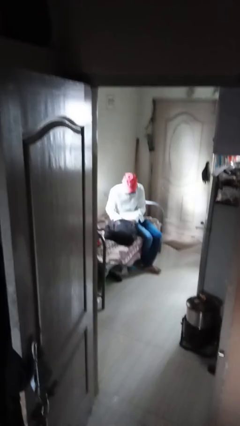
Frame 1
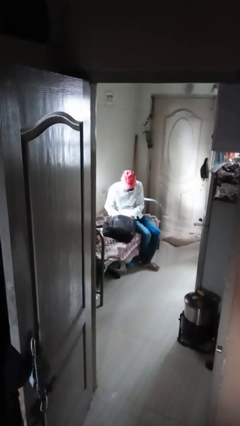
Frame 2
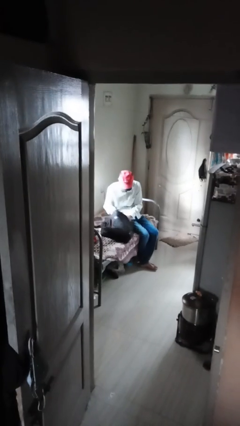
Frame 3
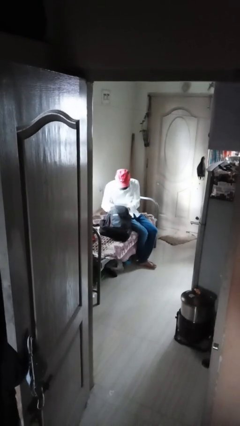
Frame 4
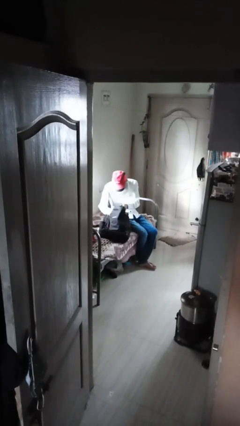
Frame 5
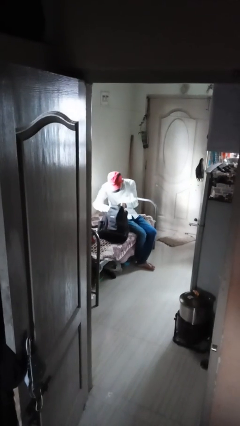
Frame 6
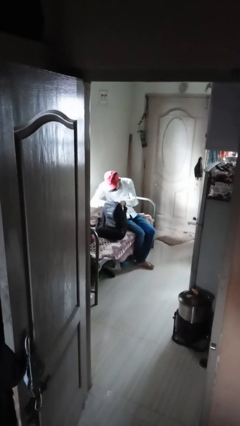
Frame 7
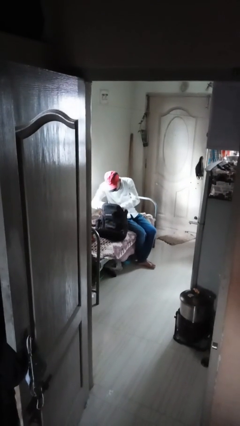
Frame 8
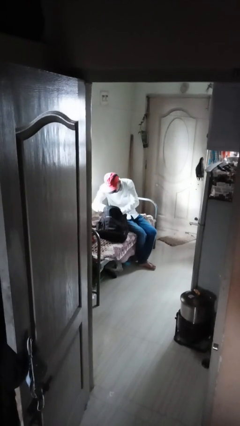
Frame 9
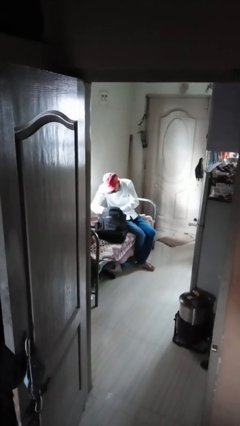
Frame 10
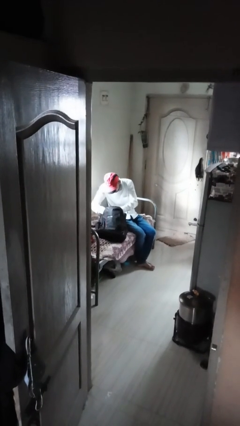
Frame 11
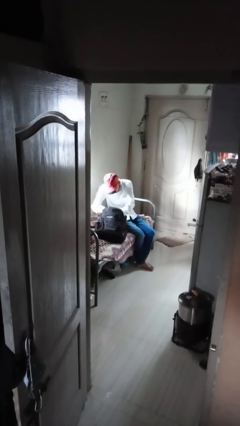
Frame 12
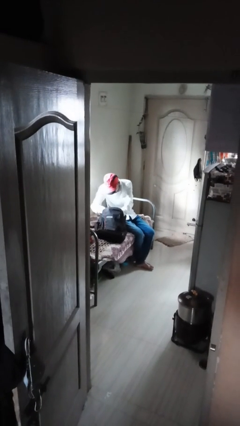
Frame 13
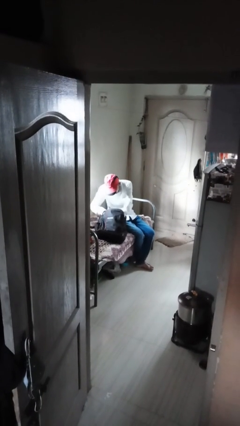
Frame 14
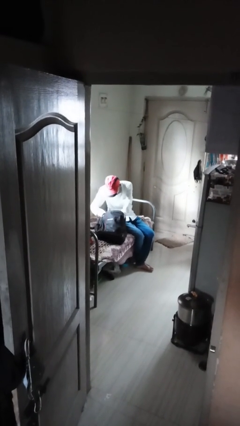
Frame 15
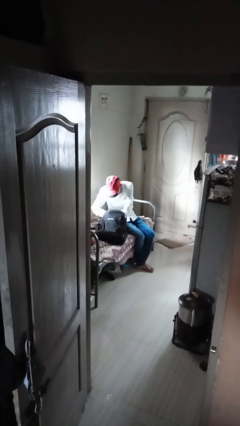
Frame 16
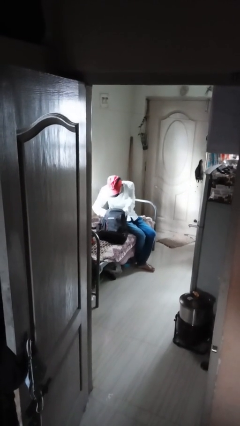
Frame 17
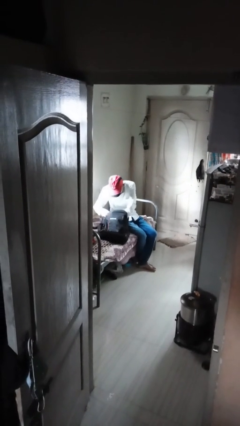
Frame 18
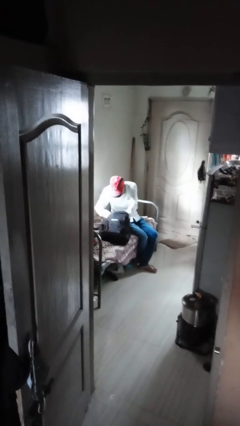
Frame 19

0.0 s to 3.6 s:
person searches in backpack

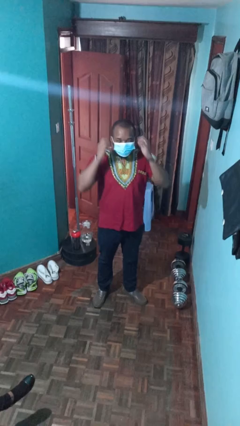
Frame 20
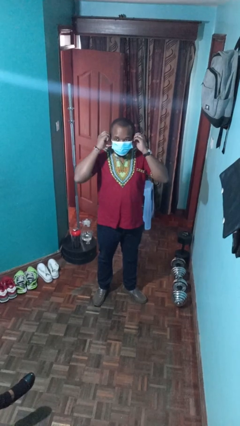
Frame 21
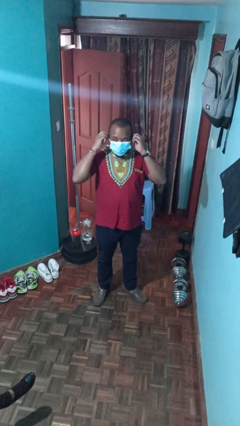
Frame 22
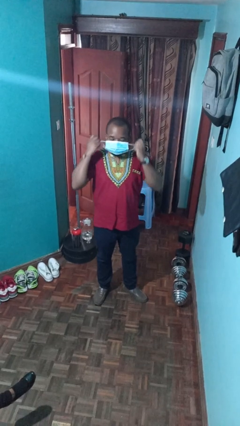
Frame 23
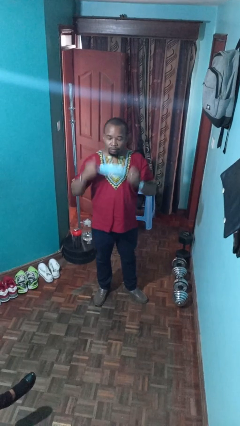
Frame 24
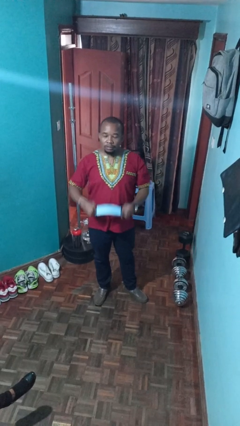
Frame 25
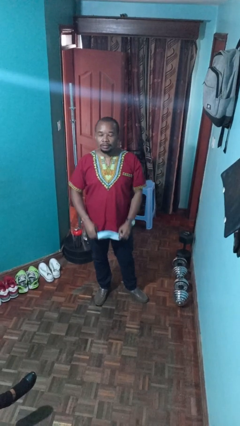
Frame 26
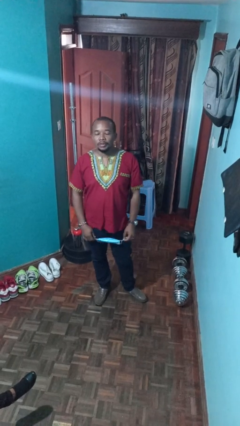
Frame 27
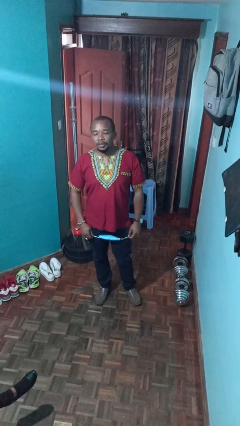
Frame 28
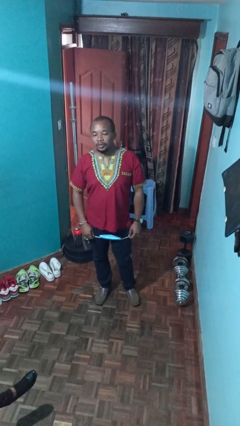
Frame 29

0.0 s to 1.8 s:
person takes off facemask

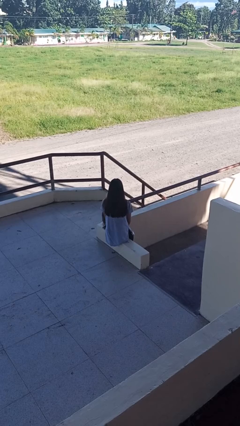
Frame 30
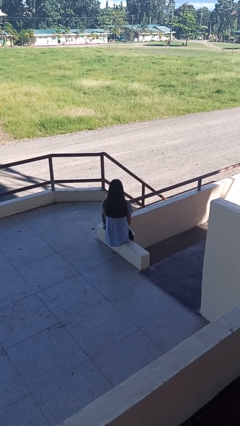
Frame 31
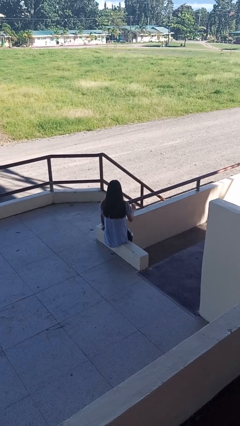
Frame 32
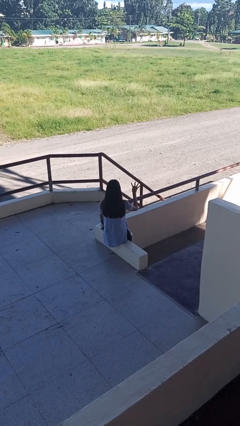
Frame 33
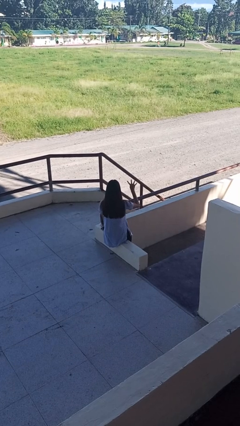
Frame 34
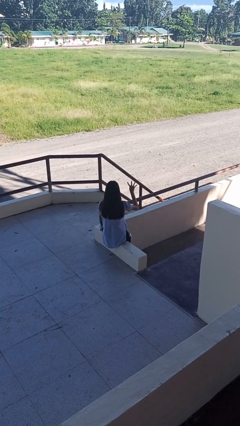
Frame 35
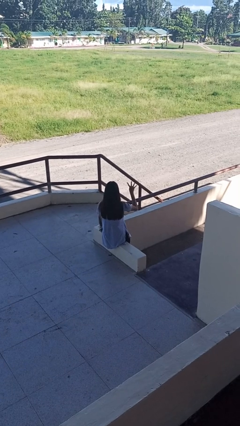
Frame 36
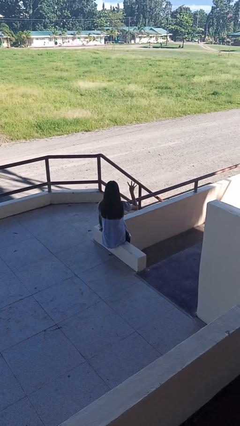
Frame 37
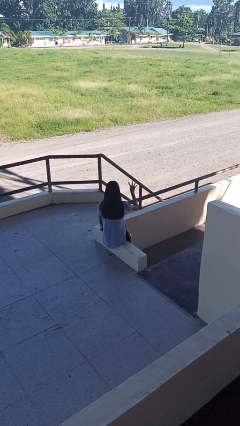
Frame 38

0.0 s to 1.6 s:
person gestures number four

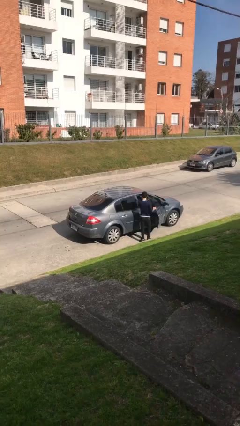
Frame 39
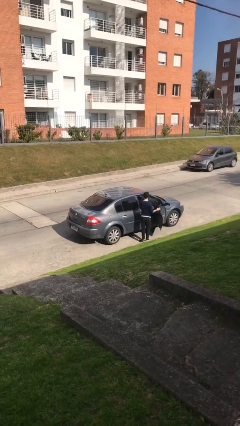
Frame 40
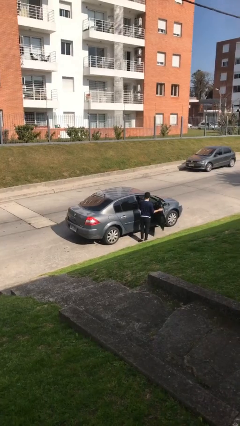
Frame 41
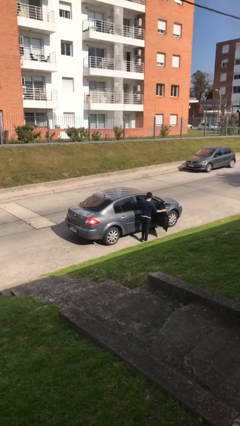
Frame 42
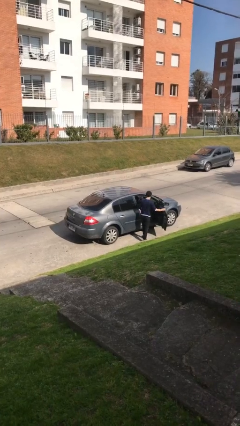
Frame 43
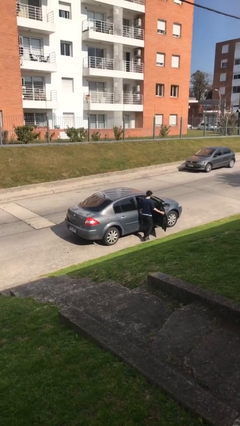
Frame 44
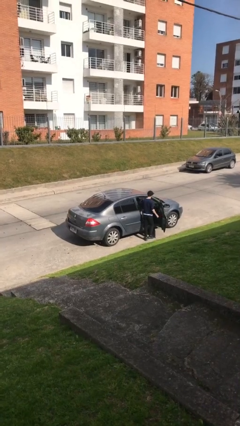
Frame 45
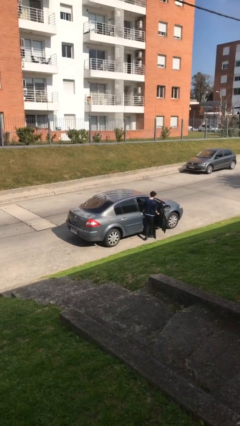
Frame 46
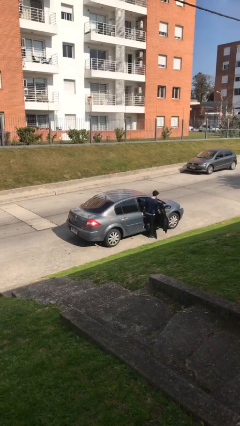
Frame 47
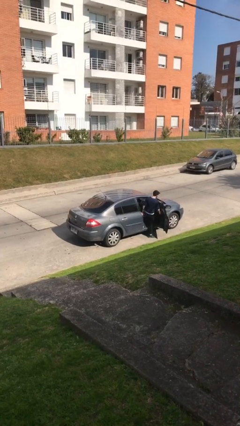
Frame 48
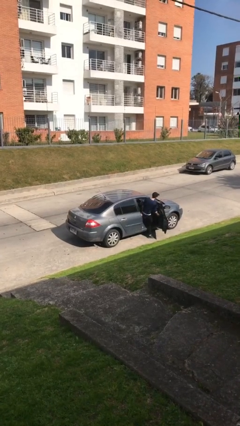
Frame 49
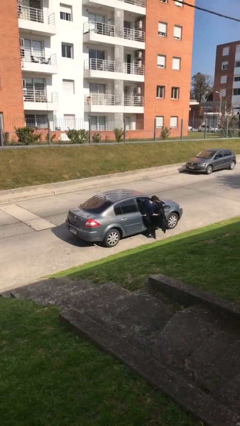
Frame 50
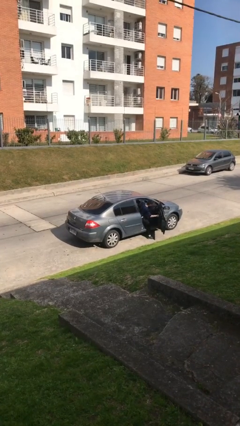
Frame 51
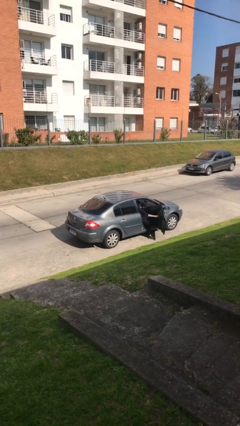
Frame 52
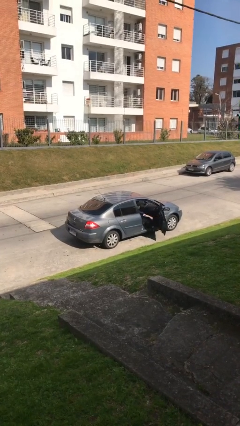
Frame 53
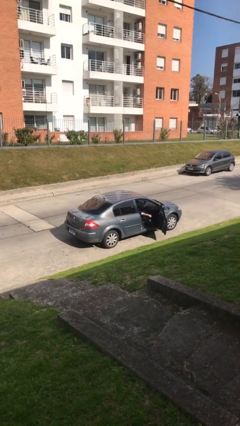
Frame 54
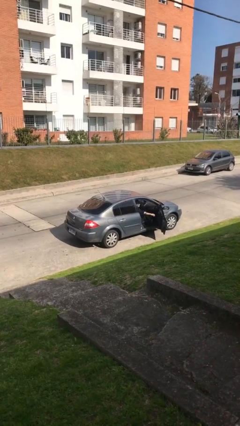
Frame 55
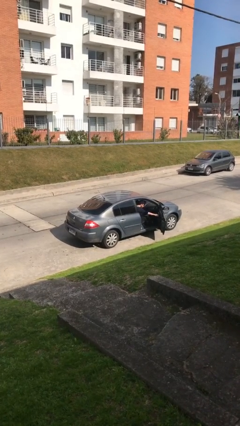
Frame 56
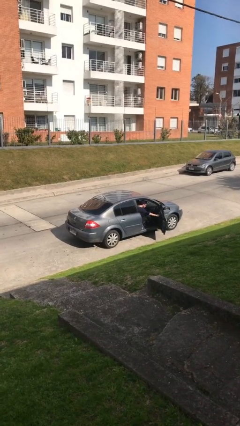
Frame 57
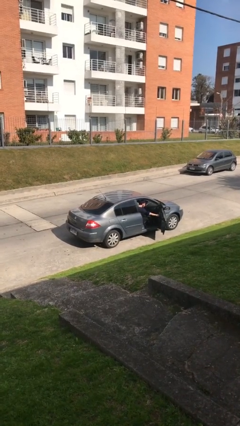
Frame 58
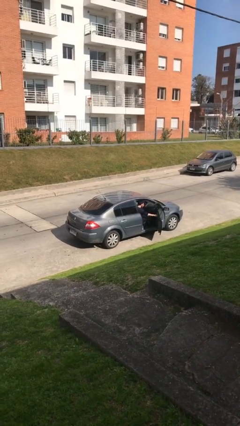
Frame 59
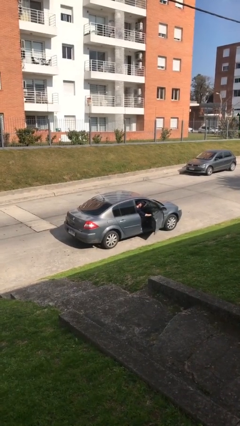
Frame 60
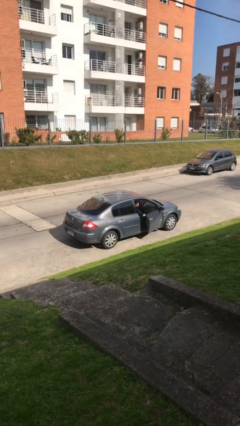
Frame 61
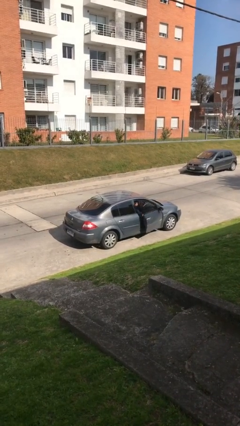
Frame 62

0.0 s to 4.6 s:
car picks up person

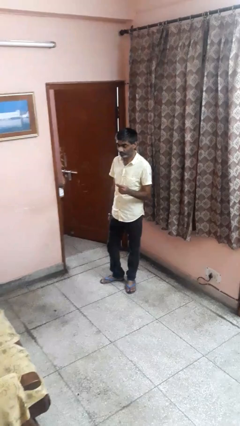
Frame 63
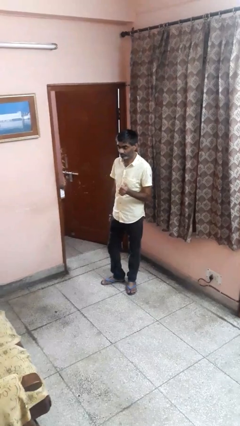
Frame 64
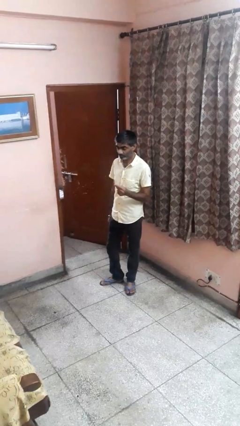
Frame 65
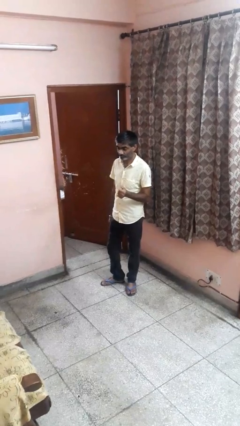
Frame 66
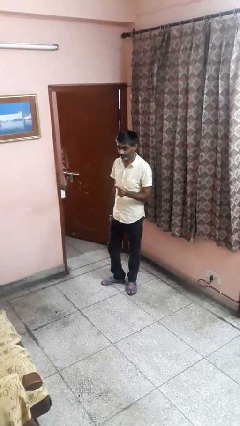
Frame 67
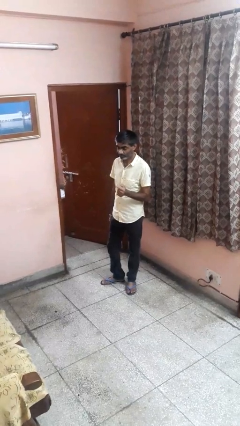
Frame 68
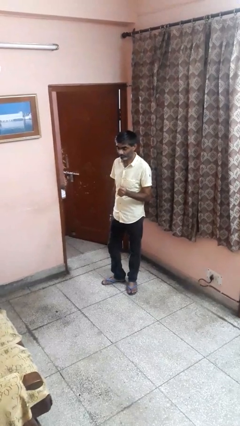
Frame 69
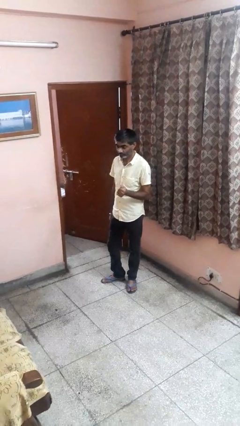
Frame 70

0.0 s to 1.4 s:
person snaps fingers

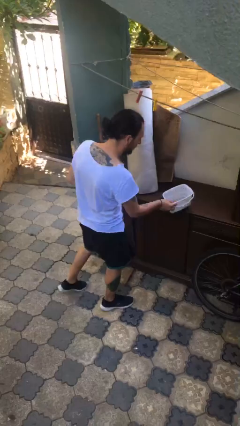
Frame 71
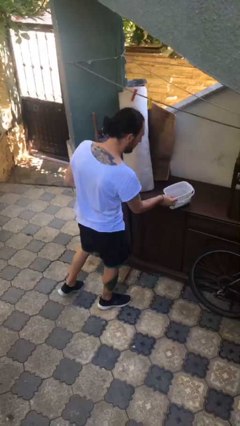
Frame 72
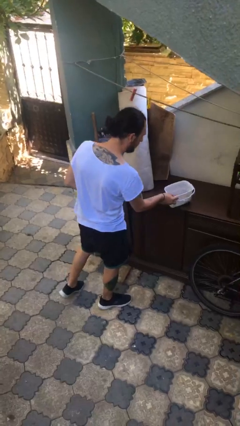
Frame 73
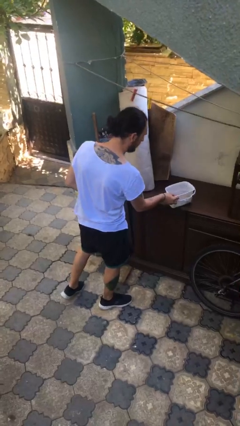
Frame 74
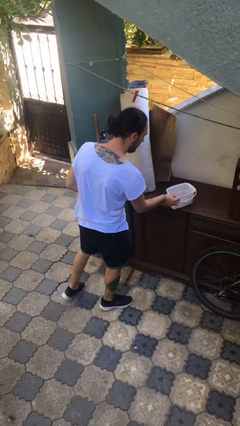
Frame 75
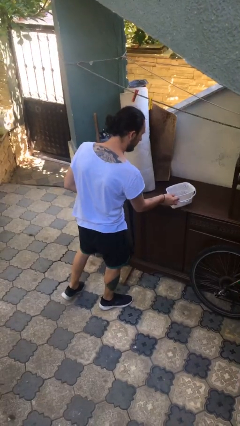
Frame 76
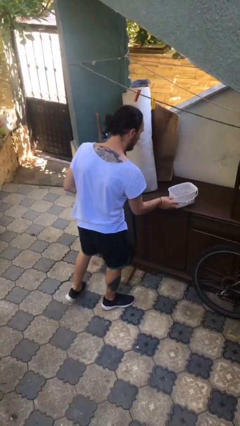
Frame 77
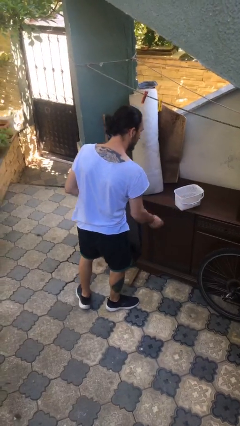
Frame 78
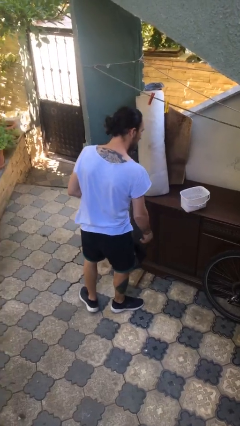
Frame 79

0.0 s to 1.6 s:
person puts down object on table

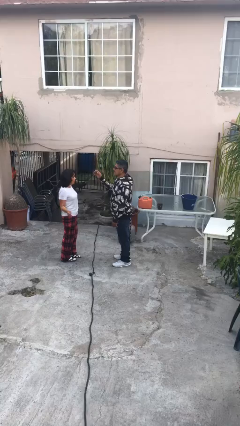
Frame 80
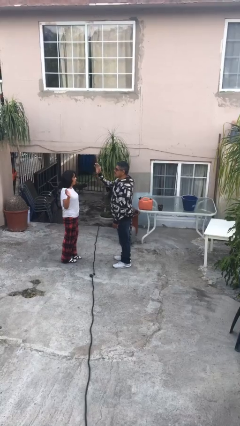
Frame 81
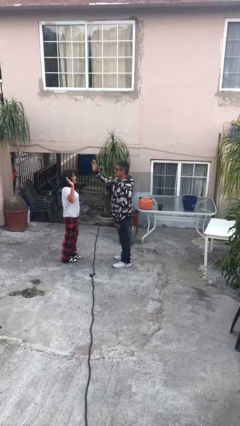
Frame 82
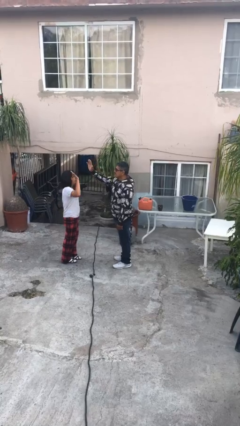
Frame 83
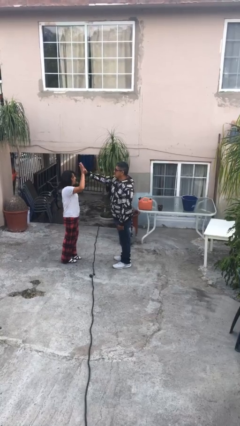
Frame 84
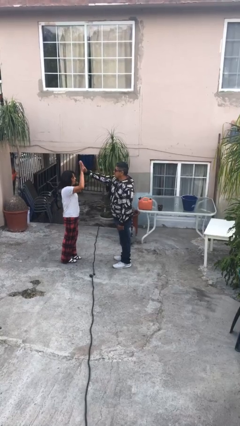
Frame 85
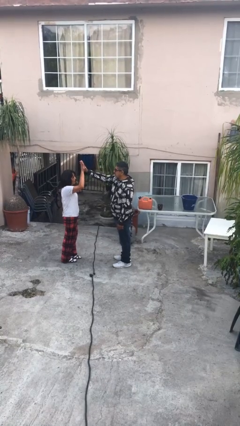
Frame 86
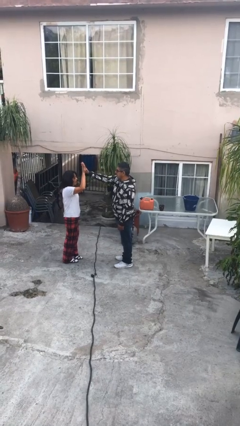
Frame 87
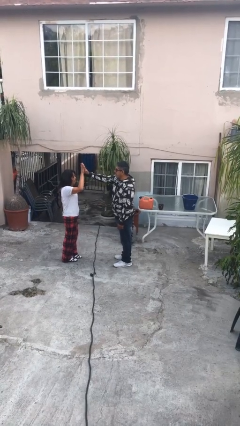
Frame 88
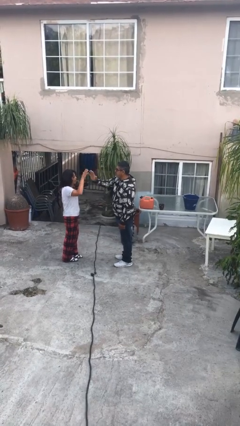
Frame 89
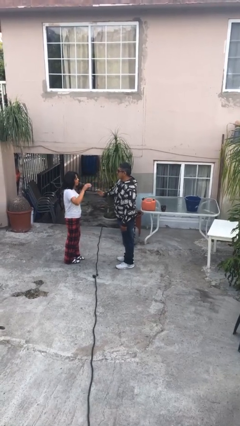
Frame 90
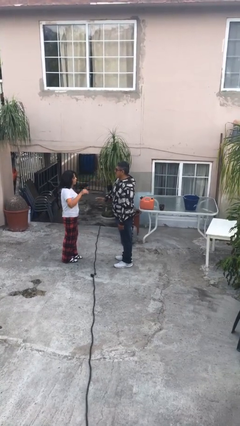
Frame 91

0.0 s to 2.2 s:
person highfives hand
